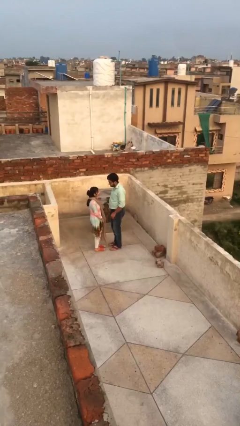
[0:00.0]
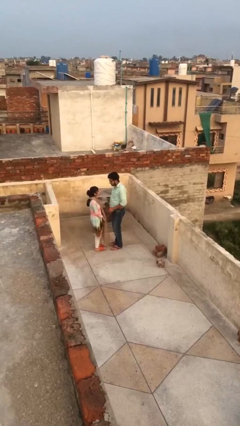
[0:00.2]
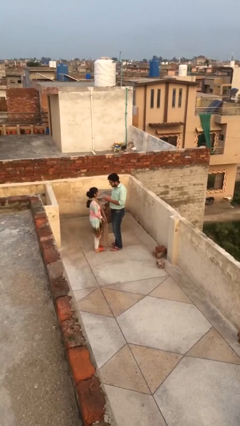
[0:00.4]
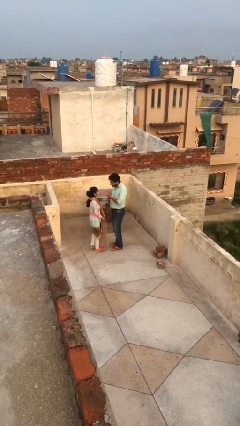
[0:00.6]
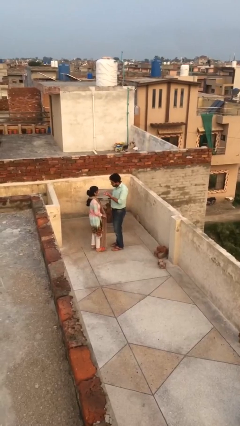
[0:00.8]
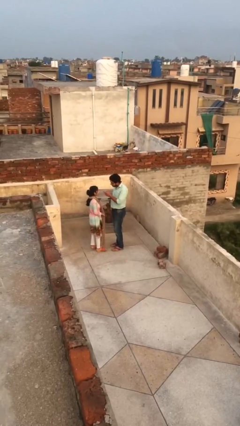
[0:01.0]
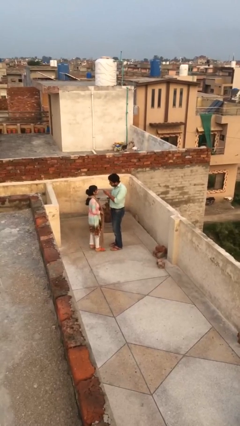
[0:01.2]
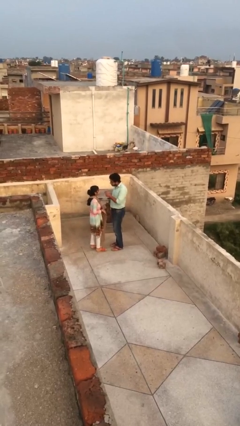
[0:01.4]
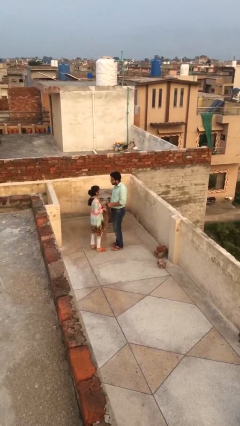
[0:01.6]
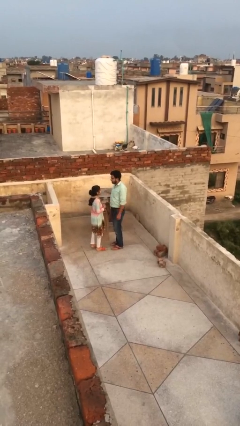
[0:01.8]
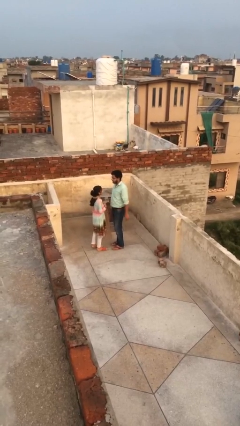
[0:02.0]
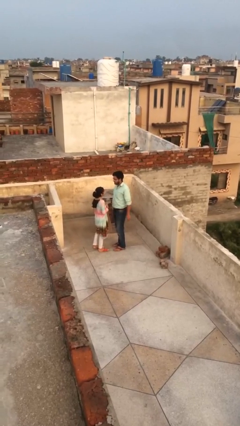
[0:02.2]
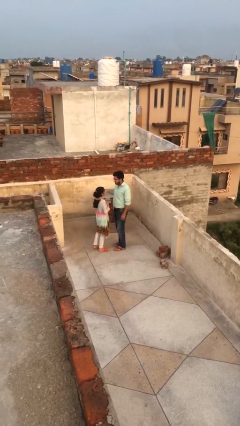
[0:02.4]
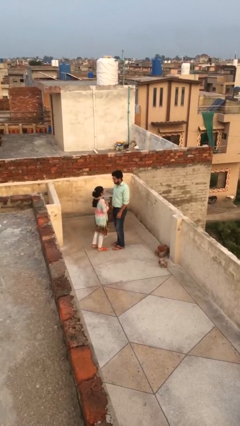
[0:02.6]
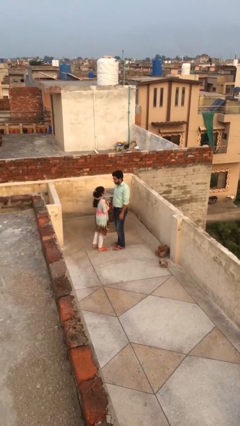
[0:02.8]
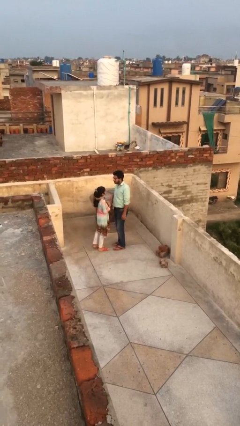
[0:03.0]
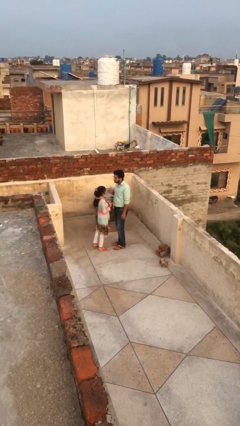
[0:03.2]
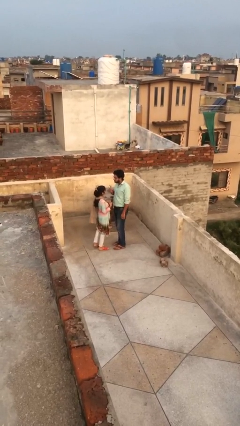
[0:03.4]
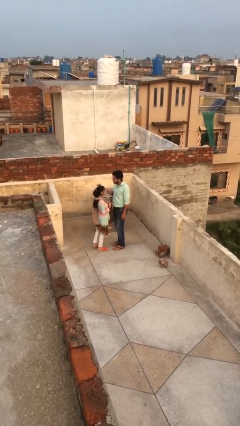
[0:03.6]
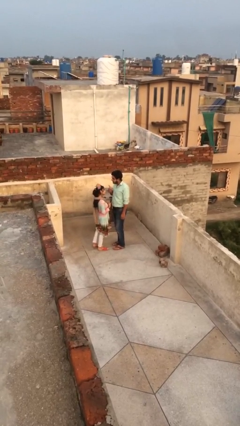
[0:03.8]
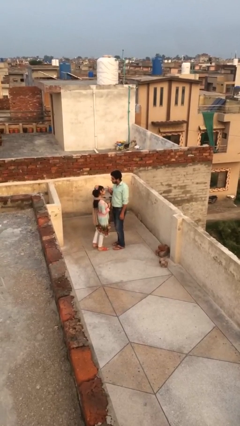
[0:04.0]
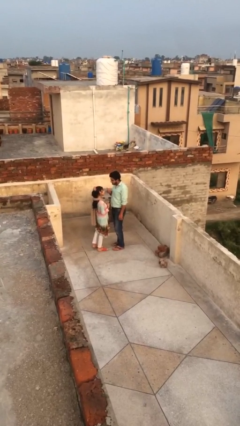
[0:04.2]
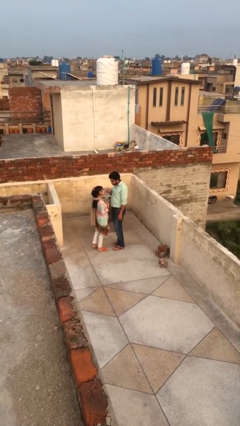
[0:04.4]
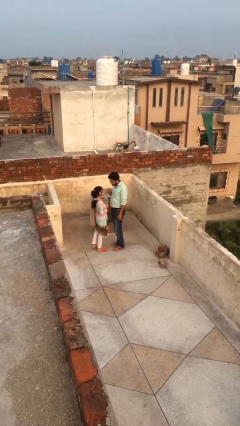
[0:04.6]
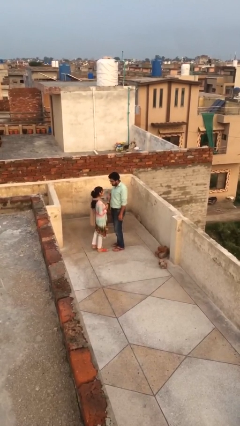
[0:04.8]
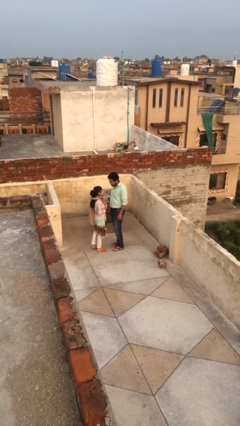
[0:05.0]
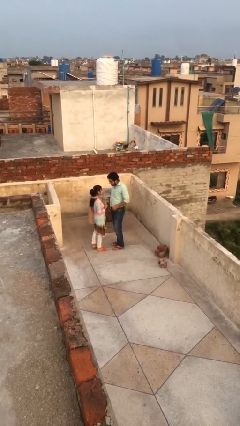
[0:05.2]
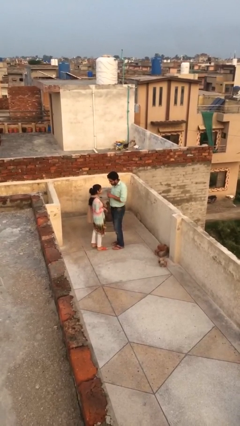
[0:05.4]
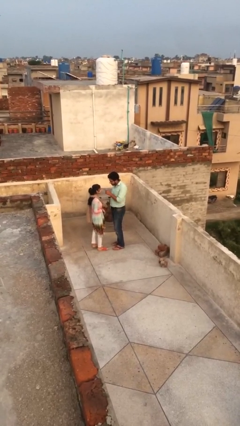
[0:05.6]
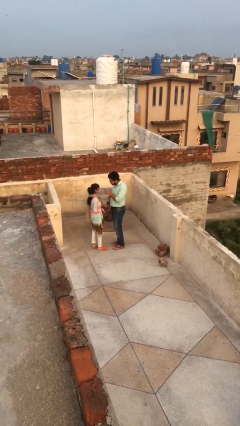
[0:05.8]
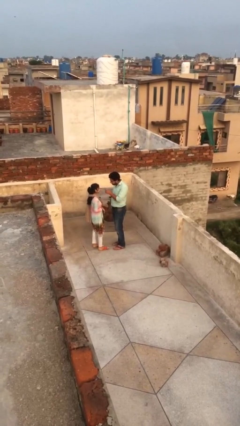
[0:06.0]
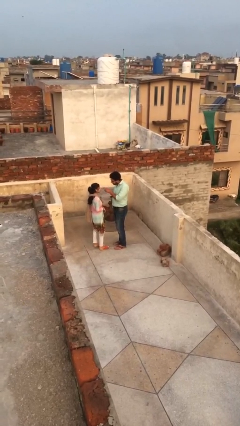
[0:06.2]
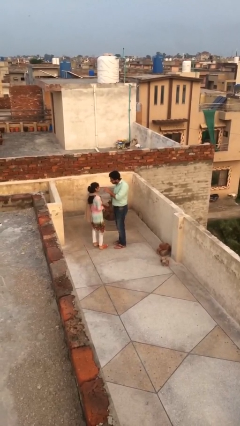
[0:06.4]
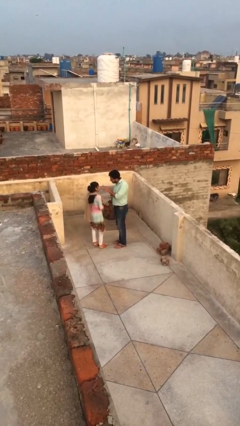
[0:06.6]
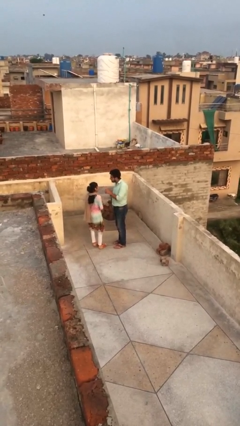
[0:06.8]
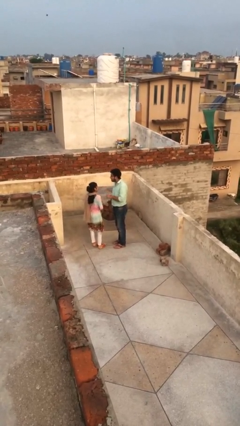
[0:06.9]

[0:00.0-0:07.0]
person talks to person

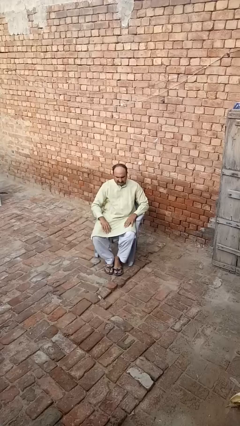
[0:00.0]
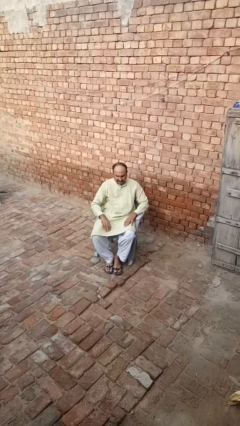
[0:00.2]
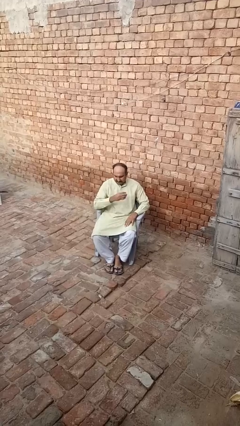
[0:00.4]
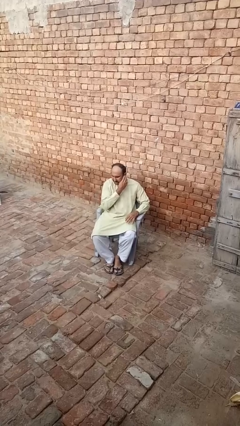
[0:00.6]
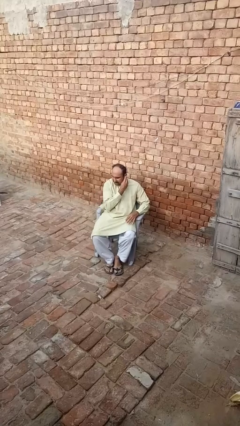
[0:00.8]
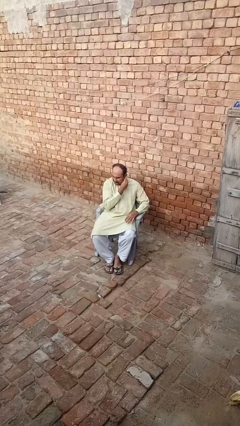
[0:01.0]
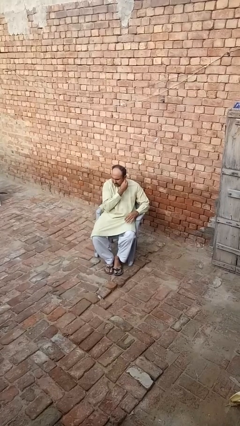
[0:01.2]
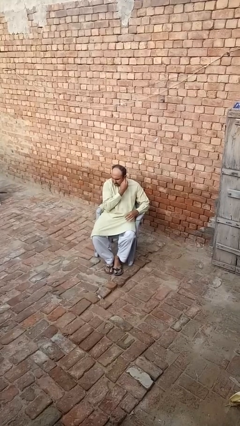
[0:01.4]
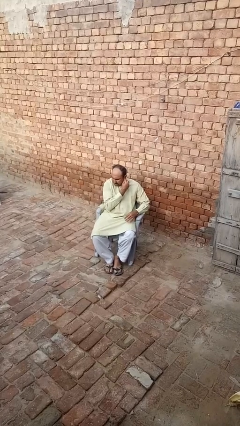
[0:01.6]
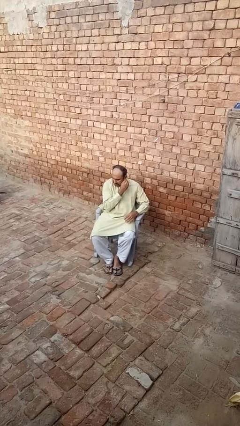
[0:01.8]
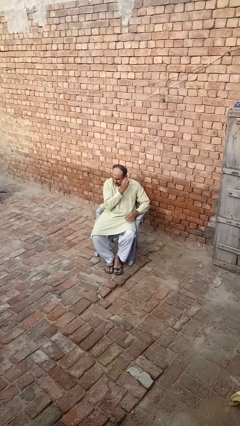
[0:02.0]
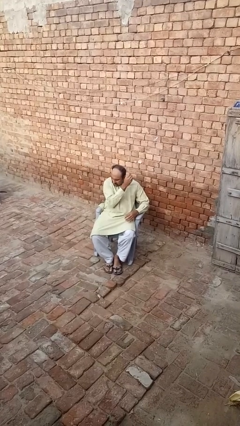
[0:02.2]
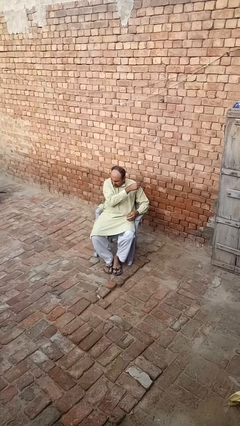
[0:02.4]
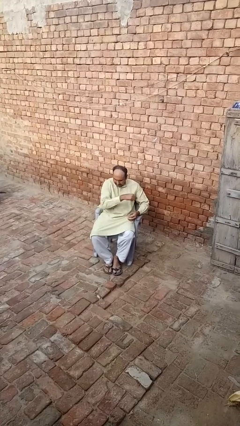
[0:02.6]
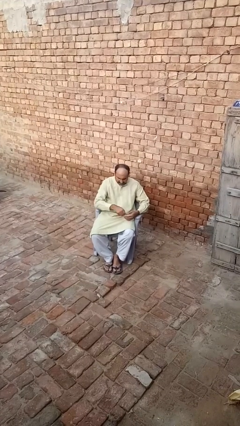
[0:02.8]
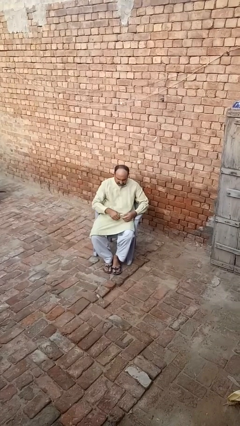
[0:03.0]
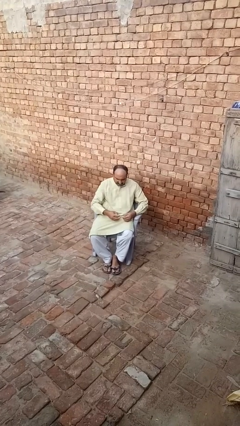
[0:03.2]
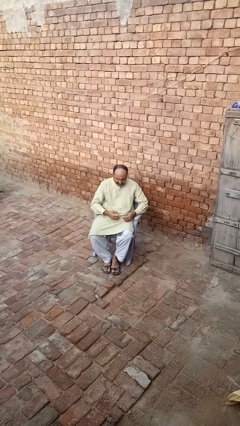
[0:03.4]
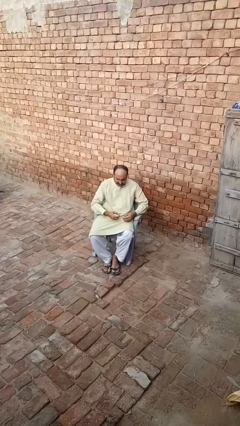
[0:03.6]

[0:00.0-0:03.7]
person takes off earrings

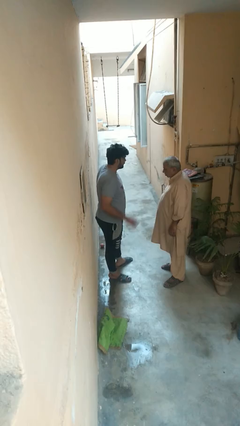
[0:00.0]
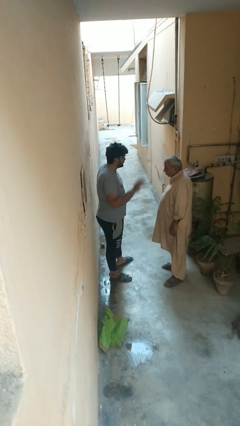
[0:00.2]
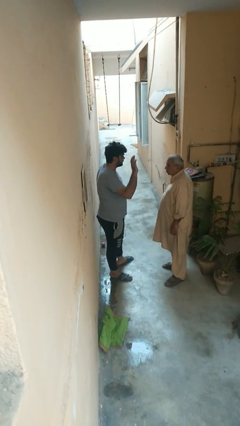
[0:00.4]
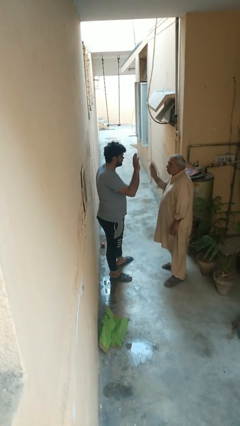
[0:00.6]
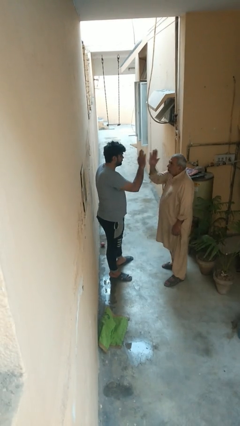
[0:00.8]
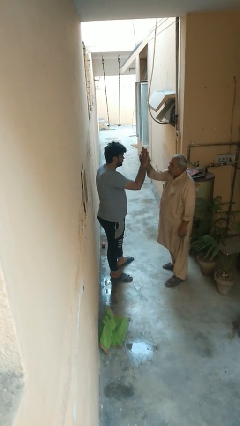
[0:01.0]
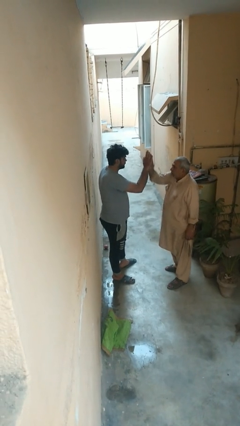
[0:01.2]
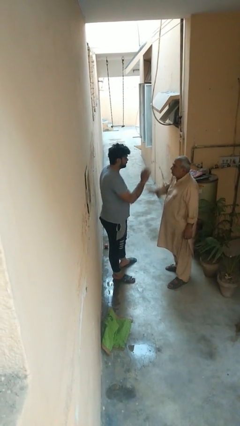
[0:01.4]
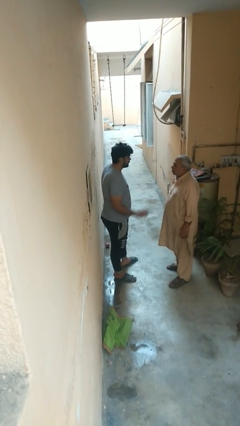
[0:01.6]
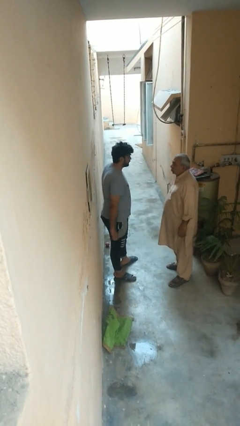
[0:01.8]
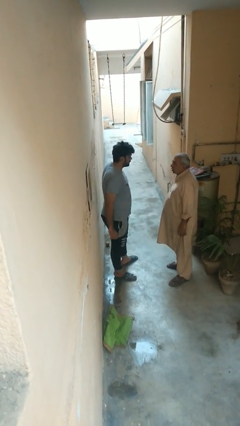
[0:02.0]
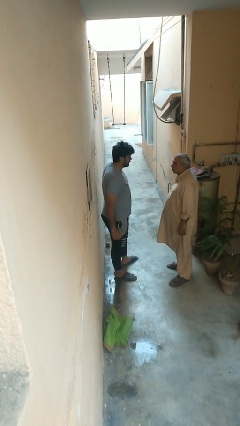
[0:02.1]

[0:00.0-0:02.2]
person highfives hand

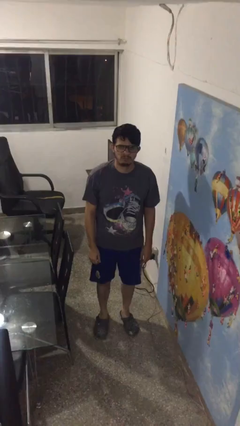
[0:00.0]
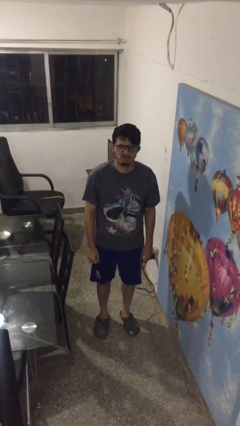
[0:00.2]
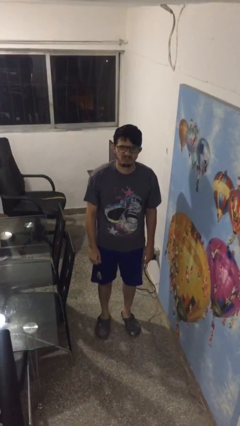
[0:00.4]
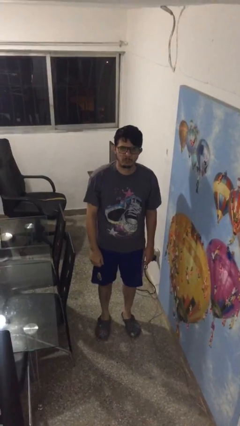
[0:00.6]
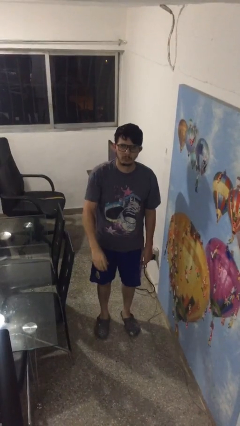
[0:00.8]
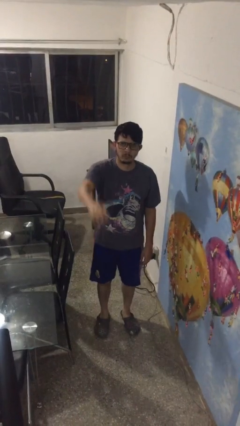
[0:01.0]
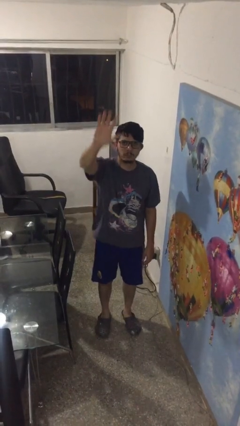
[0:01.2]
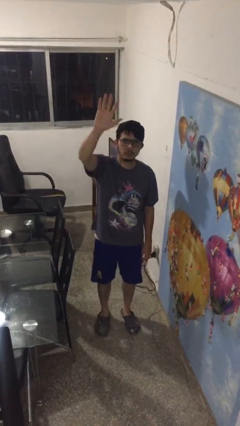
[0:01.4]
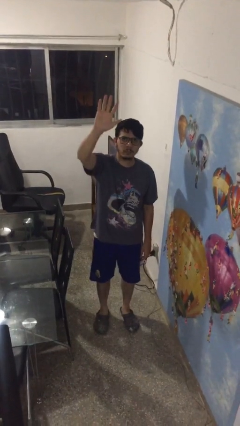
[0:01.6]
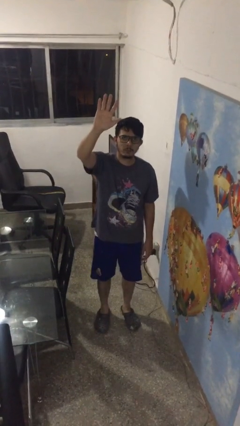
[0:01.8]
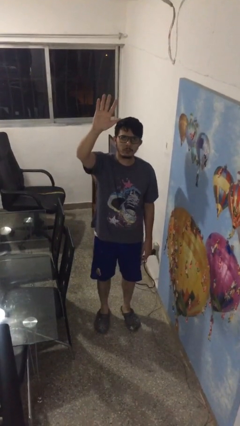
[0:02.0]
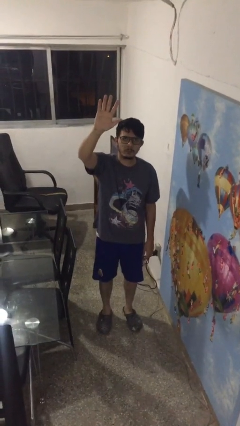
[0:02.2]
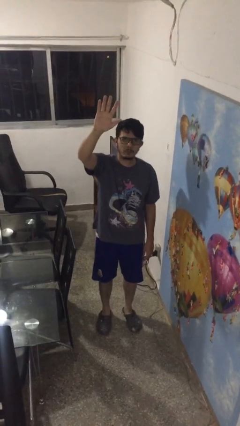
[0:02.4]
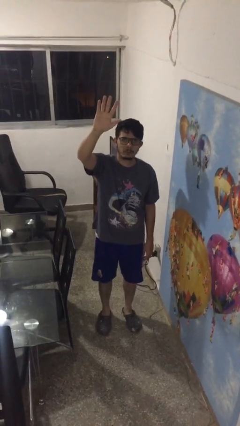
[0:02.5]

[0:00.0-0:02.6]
person gestures raise hand

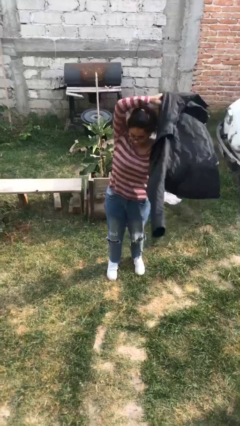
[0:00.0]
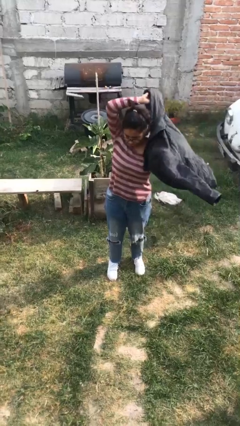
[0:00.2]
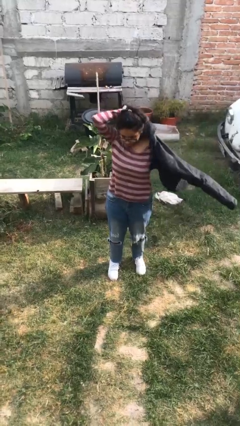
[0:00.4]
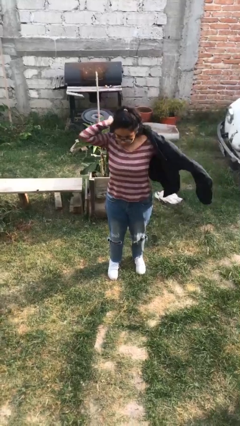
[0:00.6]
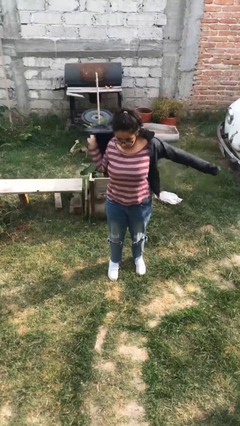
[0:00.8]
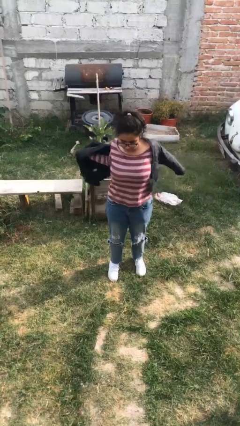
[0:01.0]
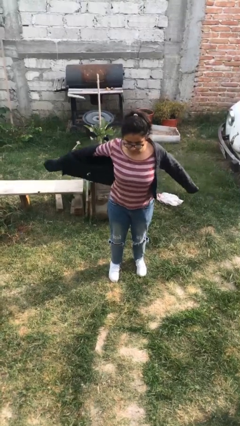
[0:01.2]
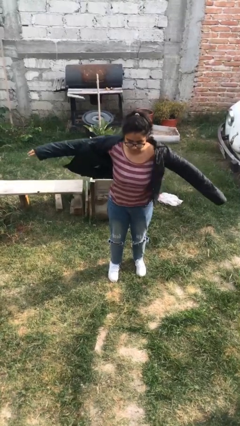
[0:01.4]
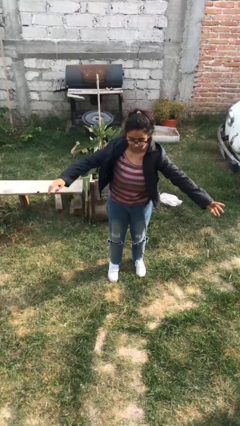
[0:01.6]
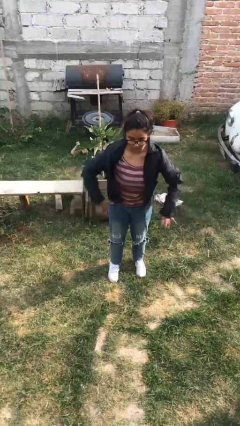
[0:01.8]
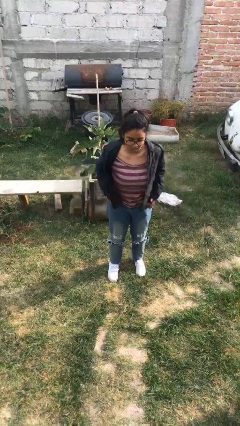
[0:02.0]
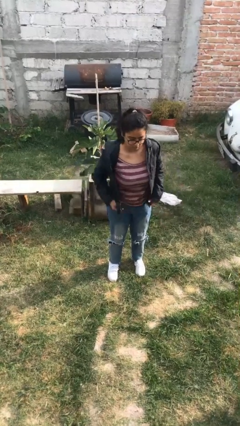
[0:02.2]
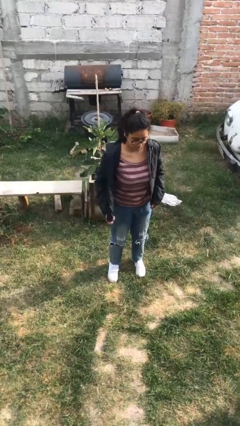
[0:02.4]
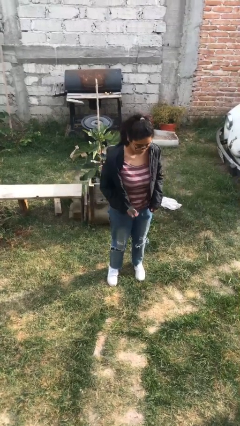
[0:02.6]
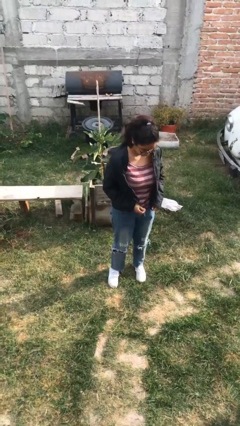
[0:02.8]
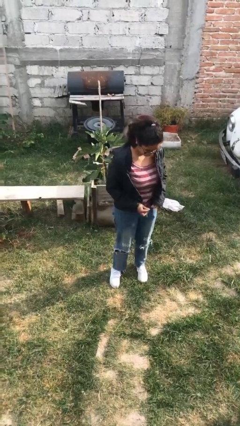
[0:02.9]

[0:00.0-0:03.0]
person puts on jacket
